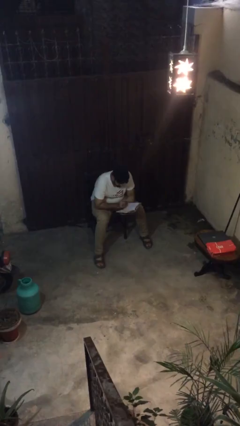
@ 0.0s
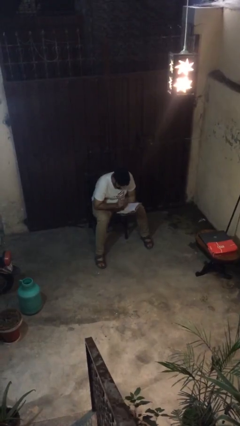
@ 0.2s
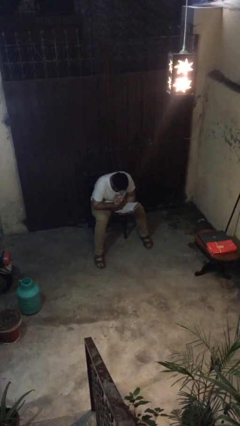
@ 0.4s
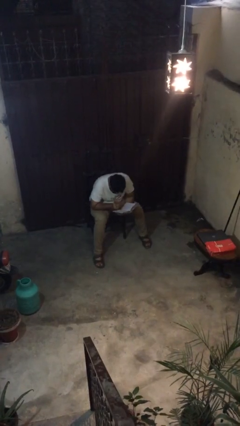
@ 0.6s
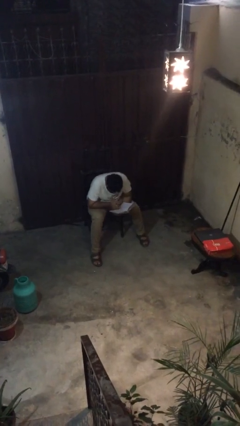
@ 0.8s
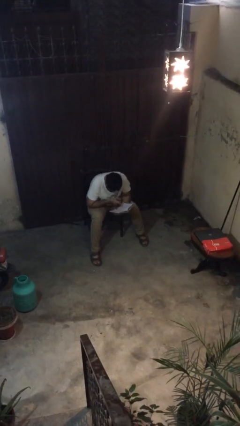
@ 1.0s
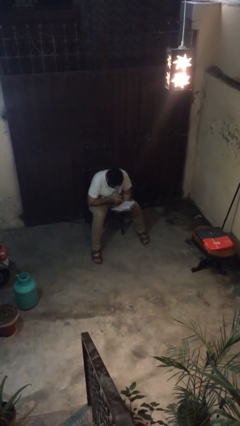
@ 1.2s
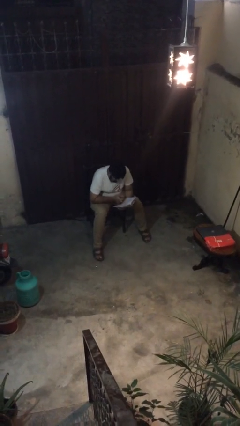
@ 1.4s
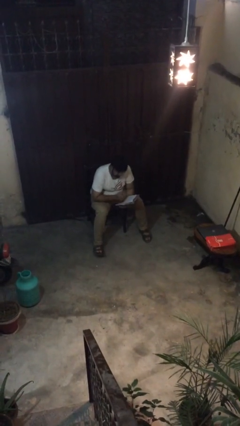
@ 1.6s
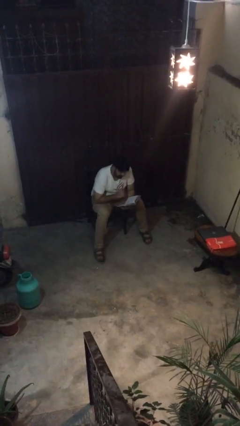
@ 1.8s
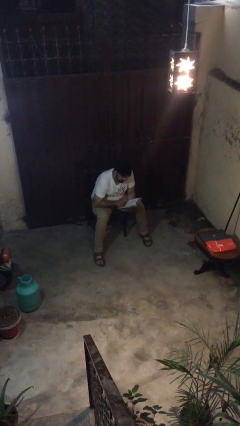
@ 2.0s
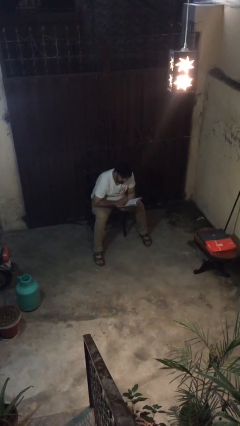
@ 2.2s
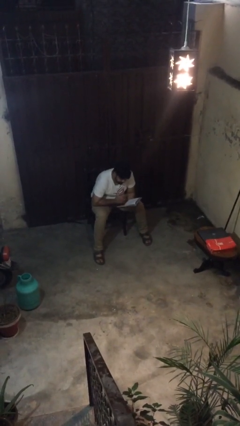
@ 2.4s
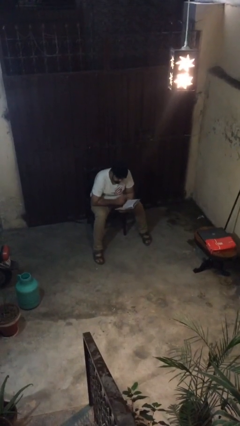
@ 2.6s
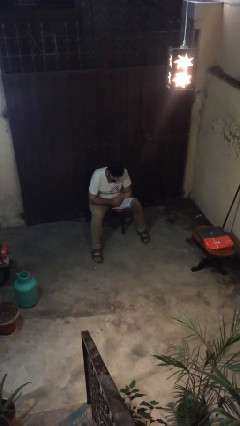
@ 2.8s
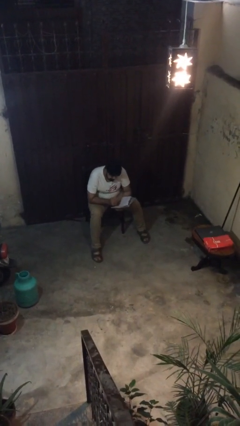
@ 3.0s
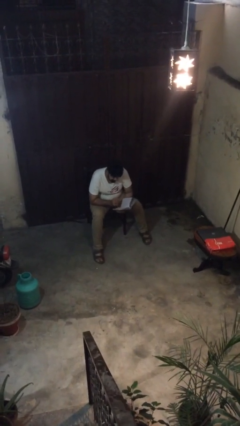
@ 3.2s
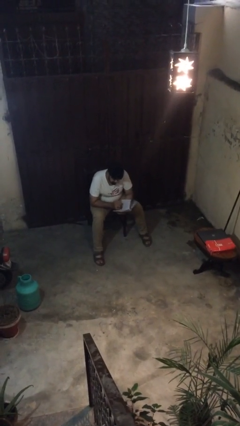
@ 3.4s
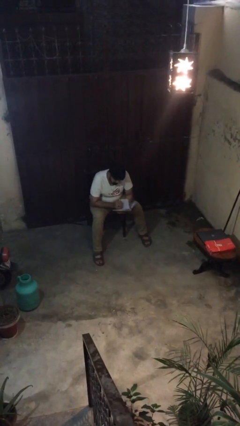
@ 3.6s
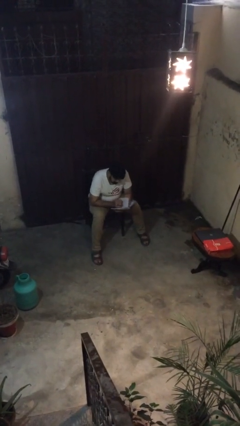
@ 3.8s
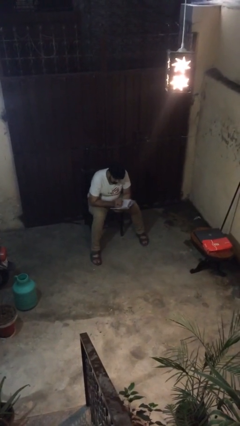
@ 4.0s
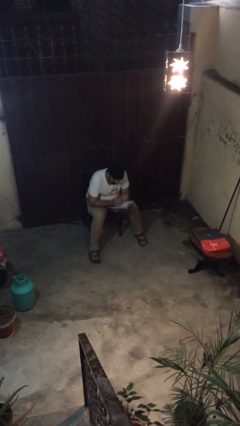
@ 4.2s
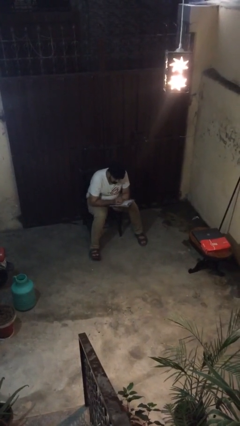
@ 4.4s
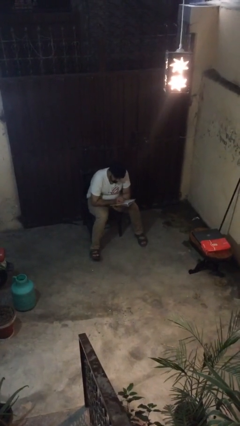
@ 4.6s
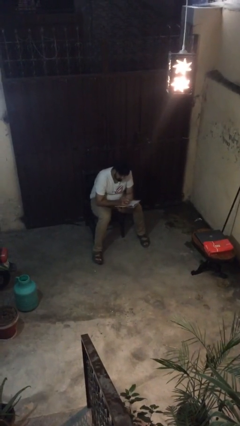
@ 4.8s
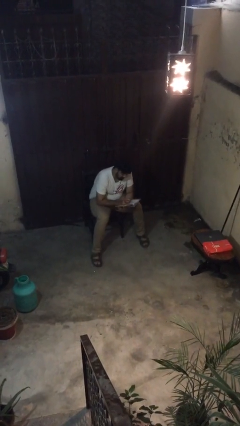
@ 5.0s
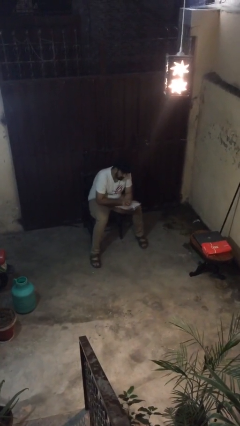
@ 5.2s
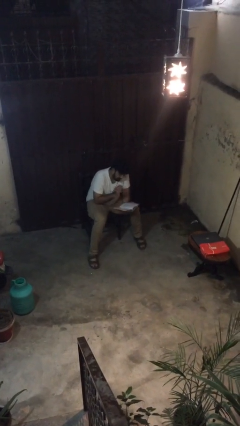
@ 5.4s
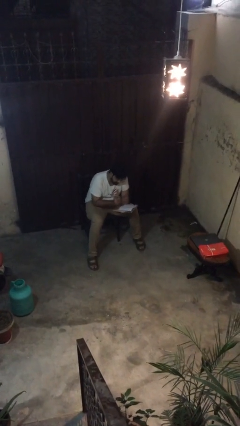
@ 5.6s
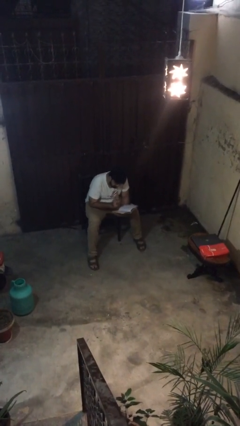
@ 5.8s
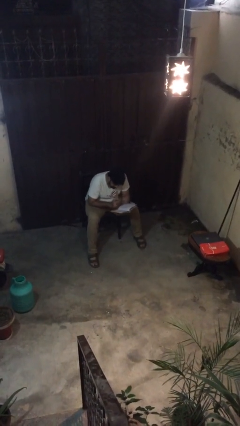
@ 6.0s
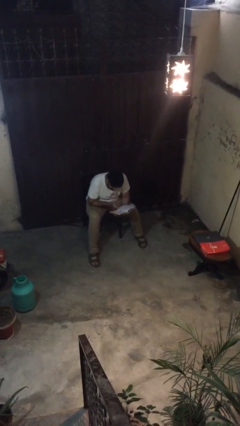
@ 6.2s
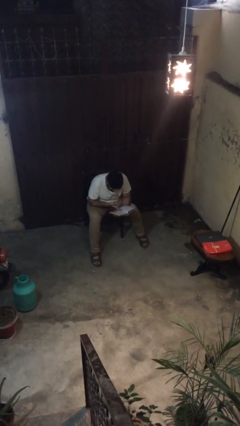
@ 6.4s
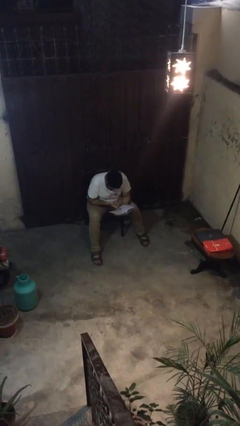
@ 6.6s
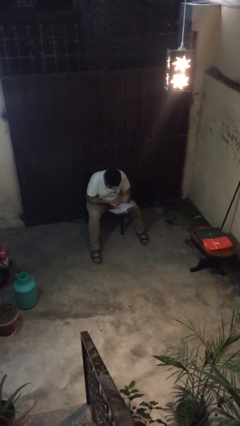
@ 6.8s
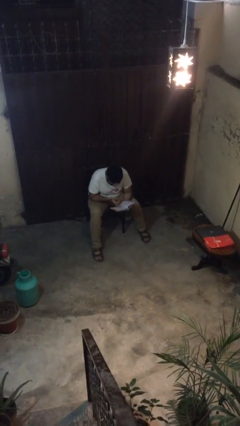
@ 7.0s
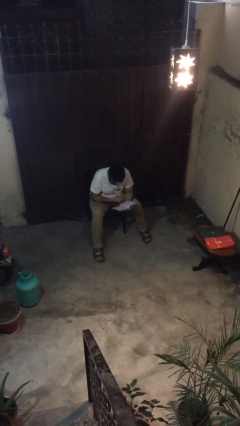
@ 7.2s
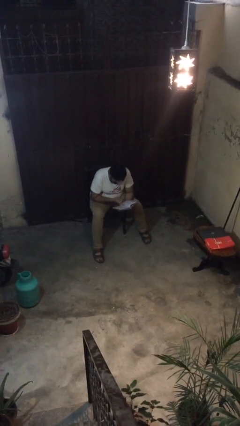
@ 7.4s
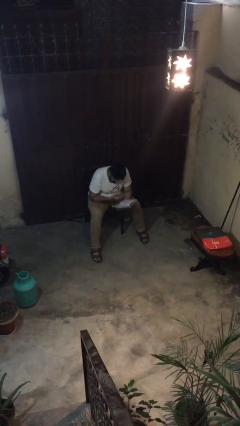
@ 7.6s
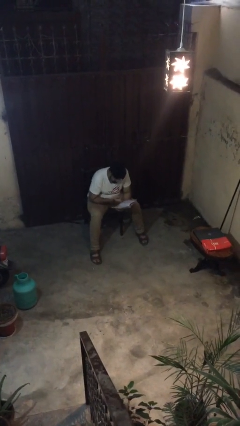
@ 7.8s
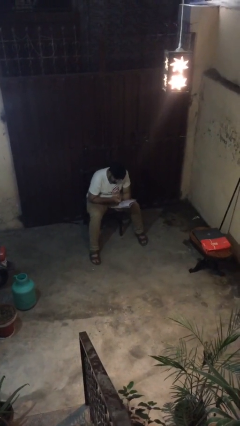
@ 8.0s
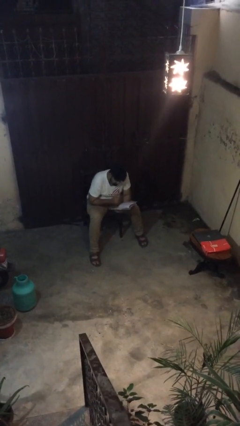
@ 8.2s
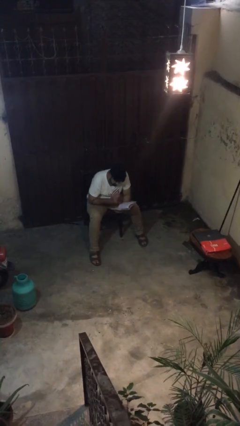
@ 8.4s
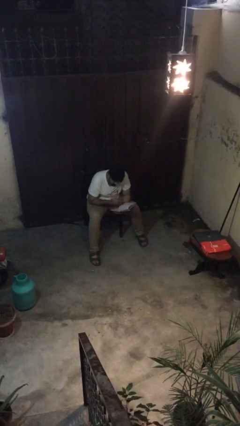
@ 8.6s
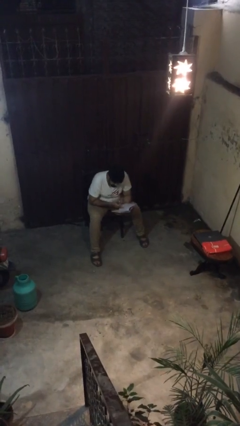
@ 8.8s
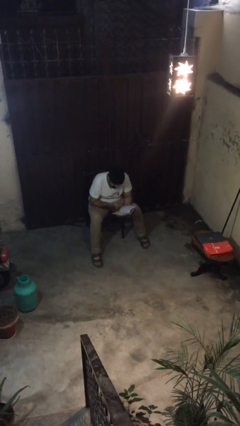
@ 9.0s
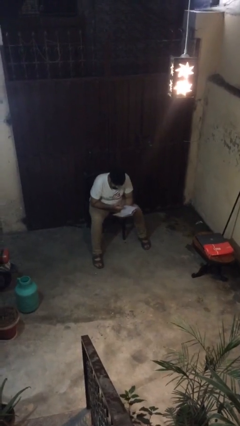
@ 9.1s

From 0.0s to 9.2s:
person reads document

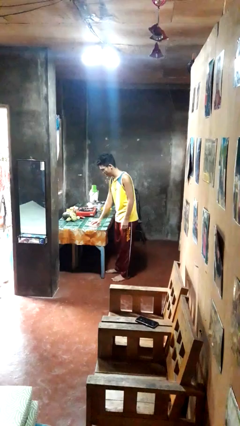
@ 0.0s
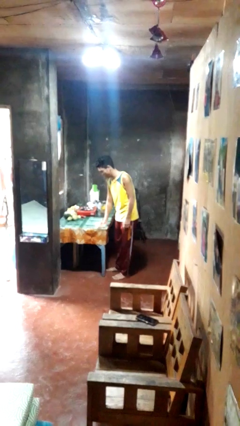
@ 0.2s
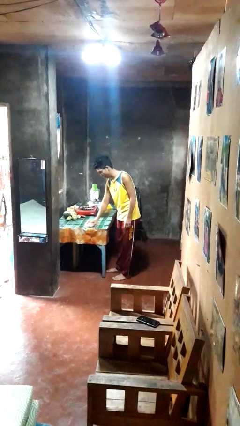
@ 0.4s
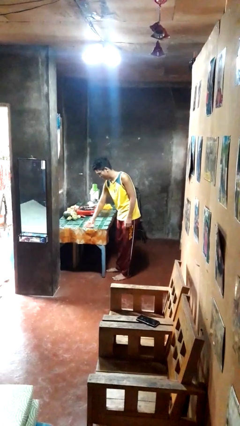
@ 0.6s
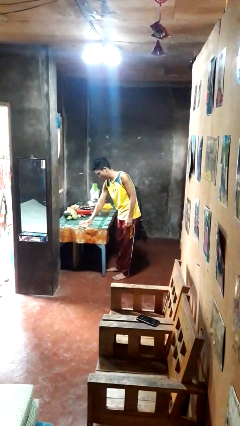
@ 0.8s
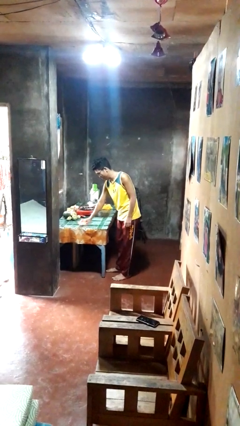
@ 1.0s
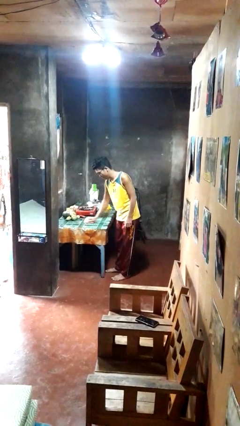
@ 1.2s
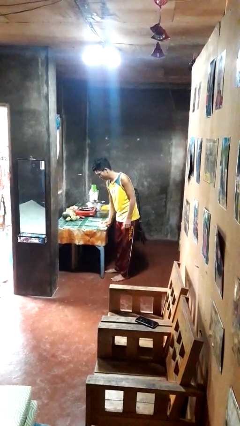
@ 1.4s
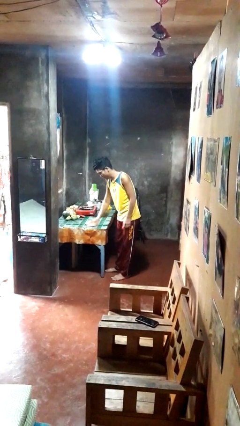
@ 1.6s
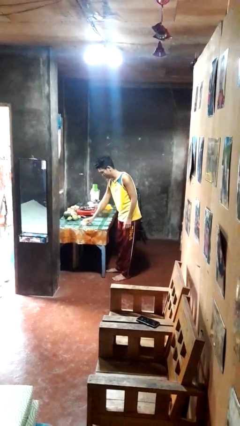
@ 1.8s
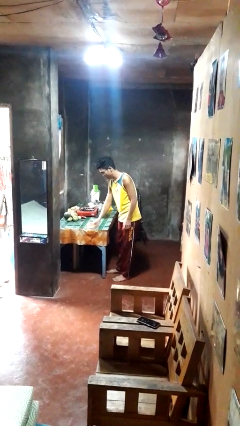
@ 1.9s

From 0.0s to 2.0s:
person cleans table with rag

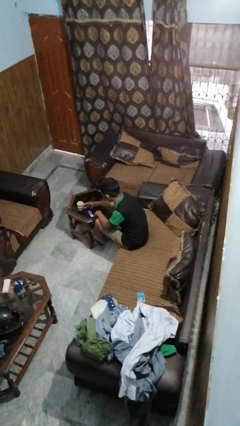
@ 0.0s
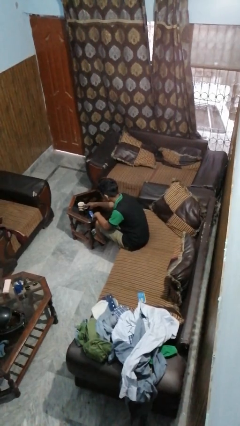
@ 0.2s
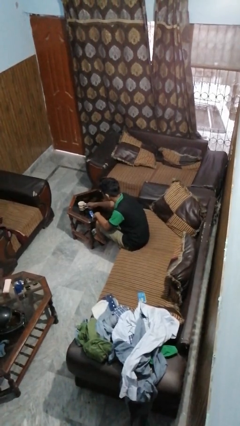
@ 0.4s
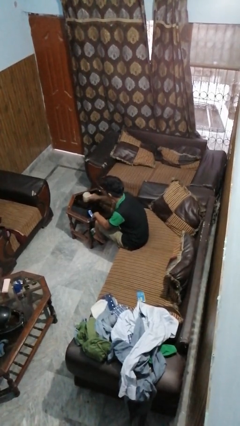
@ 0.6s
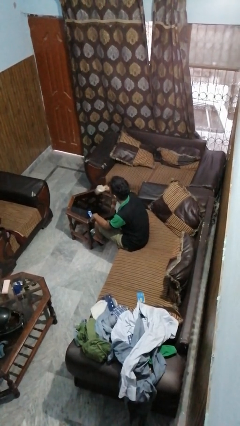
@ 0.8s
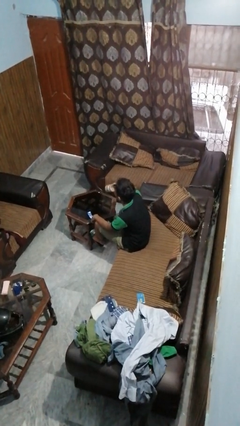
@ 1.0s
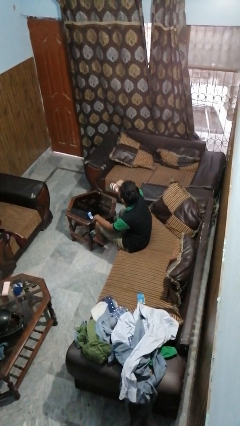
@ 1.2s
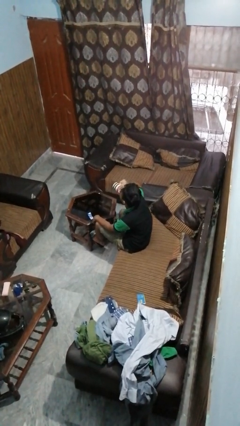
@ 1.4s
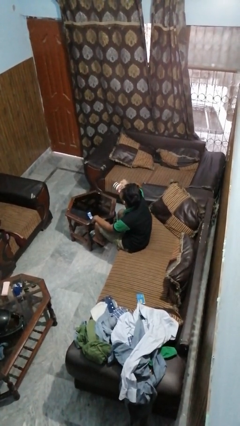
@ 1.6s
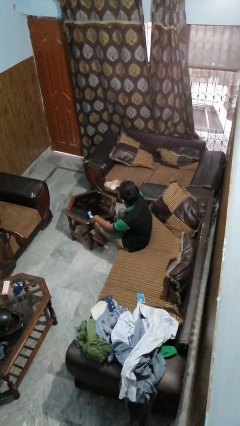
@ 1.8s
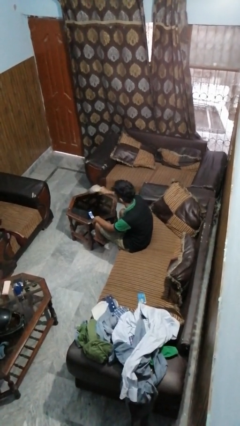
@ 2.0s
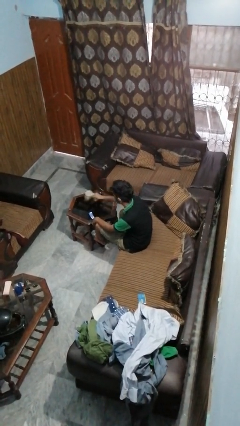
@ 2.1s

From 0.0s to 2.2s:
person drinks from cup

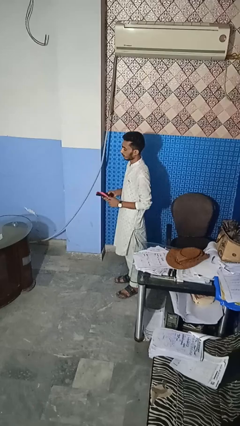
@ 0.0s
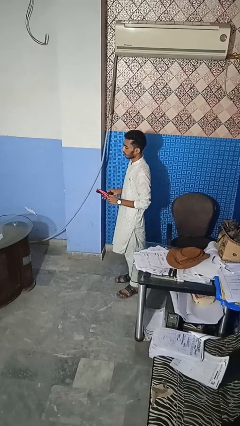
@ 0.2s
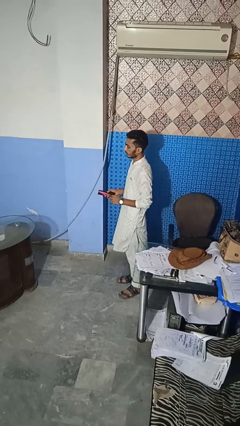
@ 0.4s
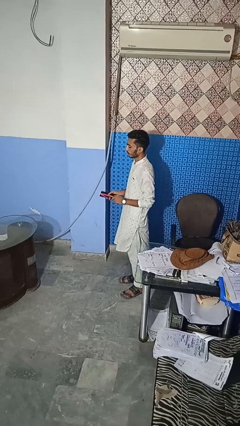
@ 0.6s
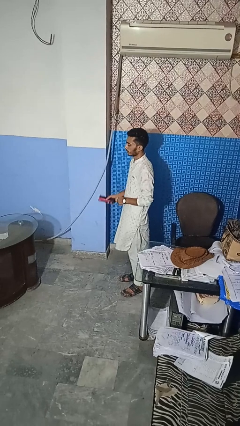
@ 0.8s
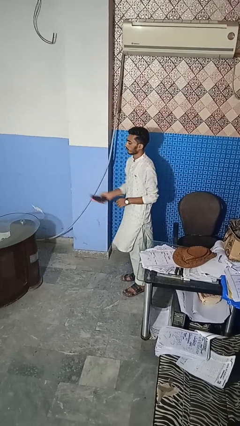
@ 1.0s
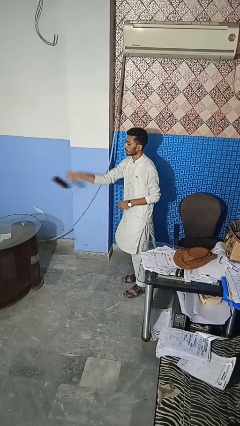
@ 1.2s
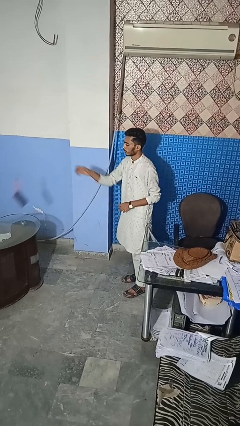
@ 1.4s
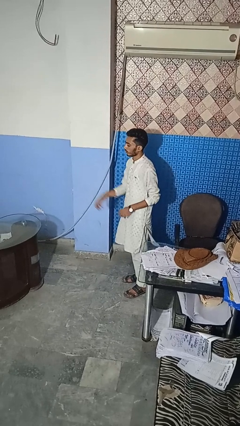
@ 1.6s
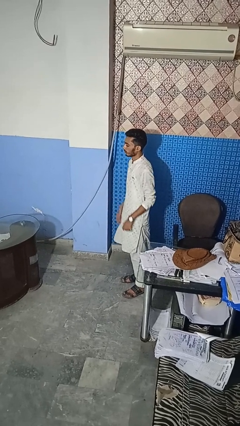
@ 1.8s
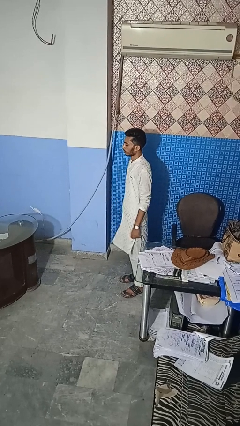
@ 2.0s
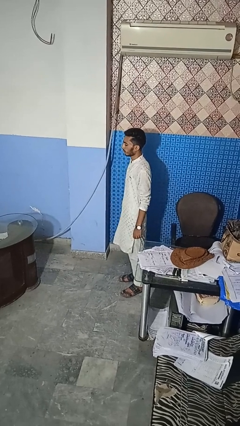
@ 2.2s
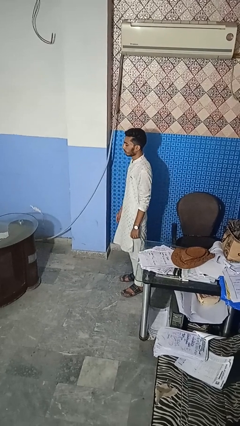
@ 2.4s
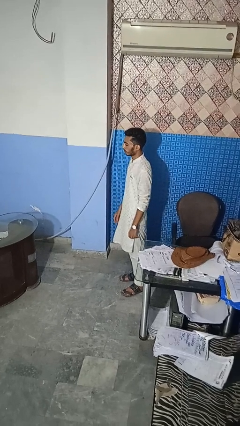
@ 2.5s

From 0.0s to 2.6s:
person throws object on table

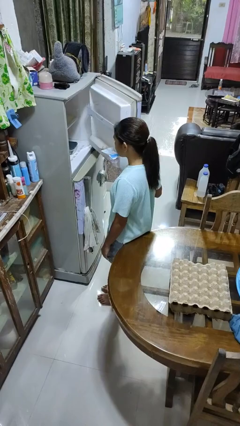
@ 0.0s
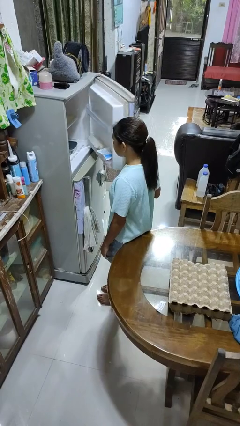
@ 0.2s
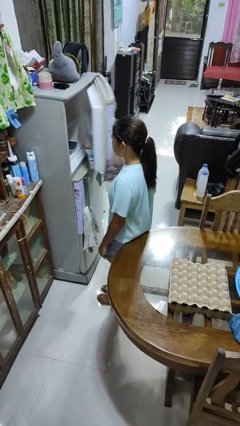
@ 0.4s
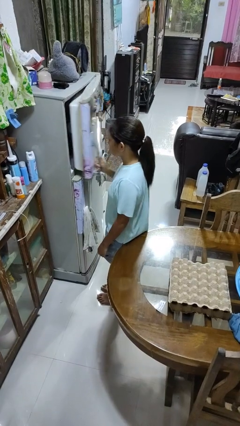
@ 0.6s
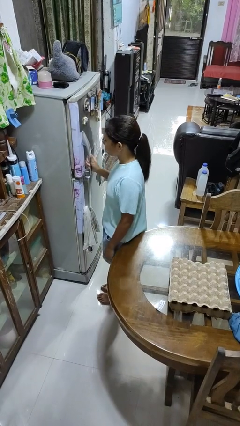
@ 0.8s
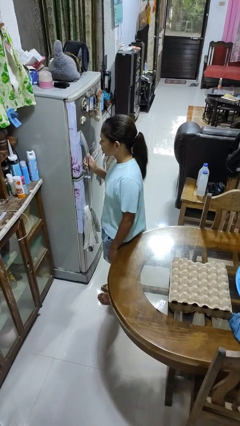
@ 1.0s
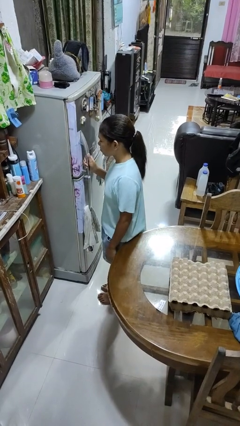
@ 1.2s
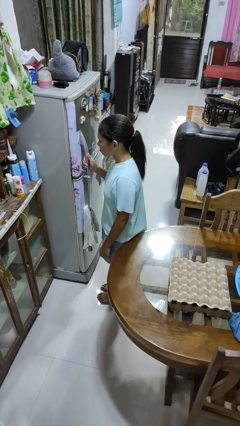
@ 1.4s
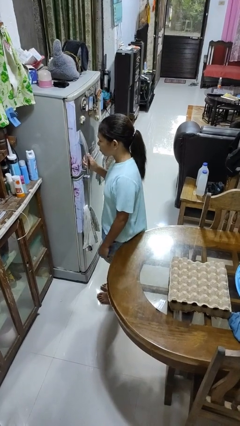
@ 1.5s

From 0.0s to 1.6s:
person closes refrigerator
